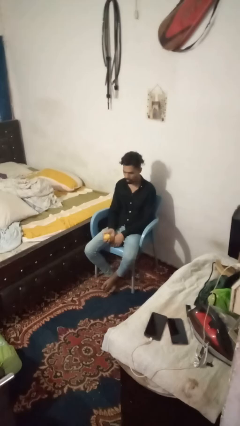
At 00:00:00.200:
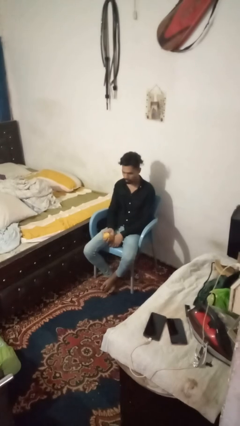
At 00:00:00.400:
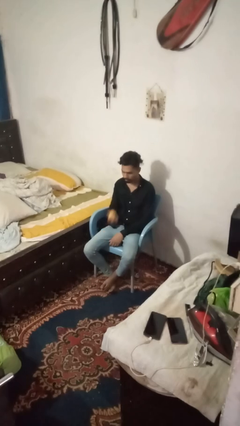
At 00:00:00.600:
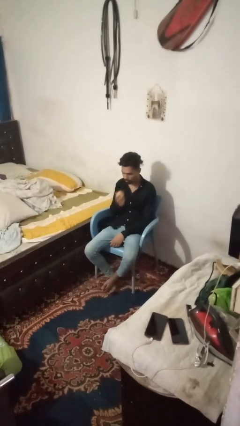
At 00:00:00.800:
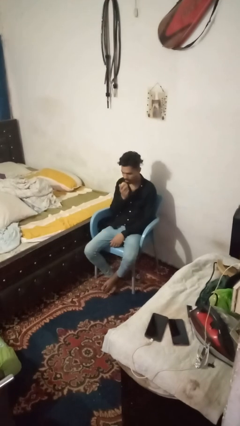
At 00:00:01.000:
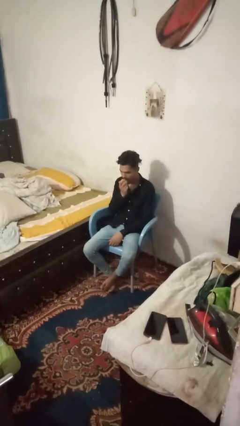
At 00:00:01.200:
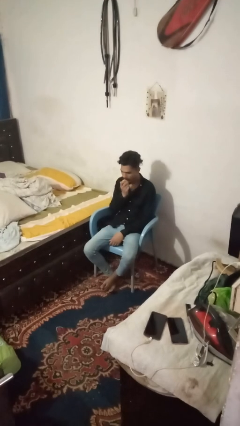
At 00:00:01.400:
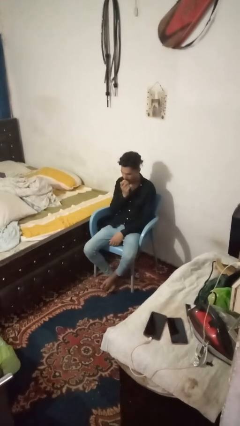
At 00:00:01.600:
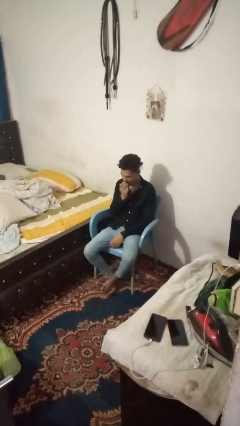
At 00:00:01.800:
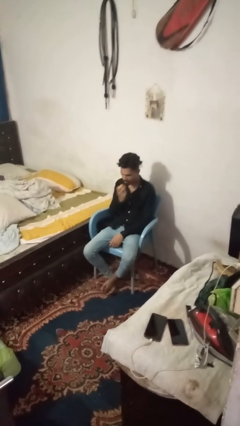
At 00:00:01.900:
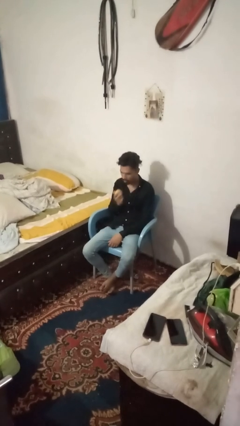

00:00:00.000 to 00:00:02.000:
person eats apple

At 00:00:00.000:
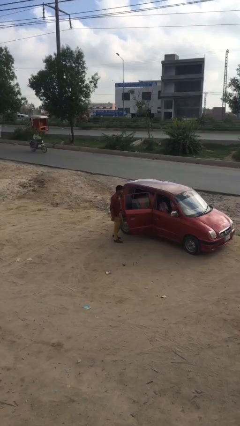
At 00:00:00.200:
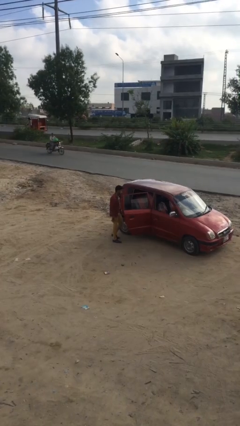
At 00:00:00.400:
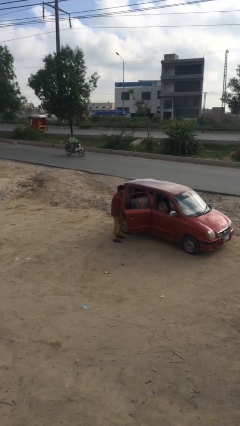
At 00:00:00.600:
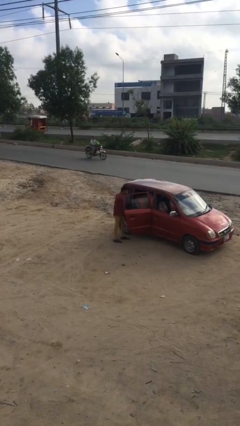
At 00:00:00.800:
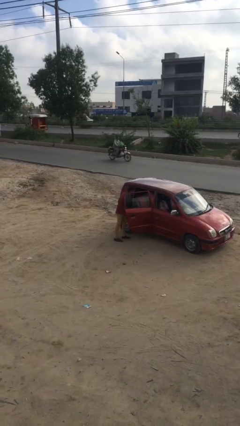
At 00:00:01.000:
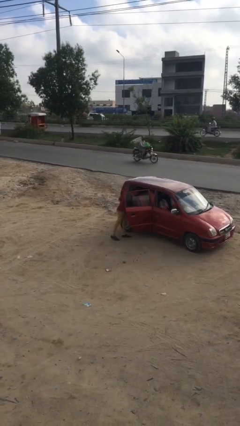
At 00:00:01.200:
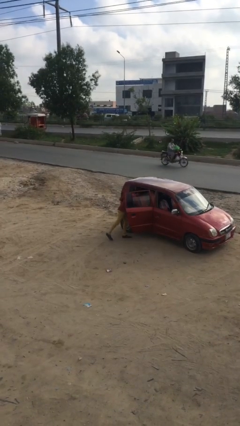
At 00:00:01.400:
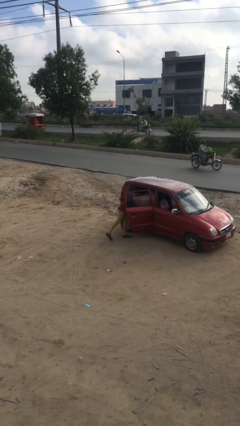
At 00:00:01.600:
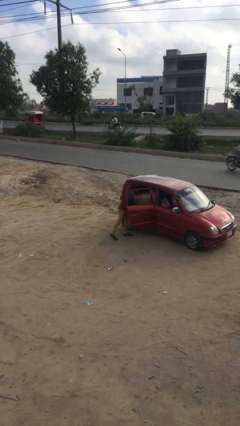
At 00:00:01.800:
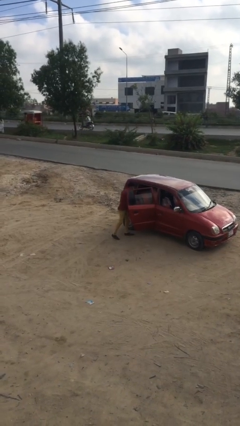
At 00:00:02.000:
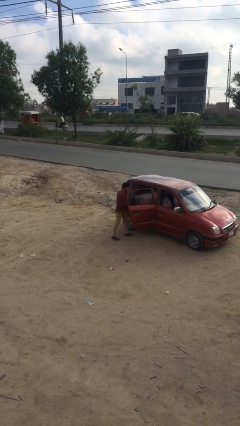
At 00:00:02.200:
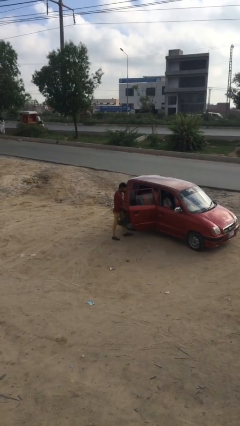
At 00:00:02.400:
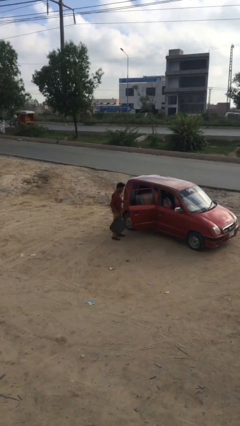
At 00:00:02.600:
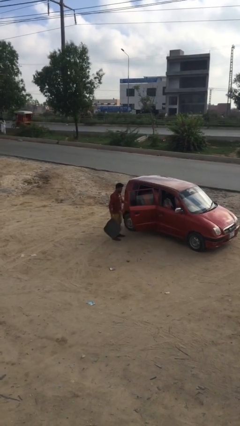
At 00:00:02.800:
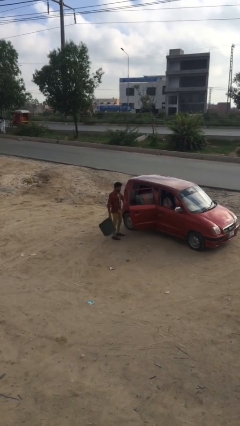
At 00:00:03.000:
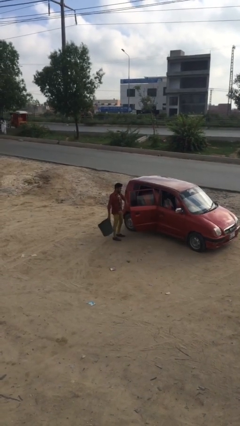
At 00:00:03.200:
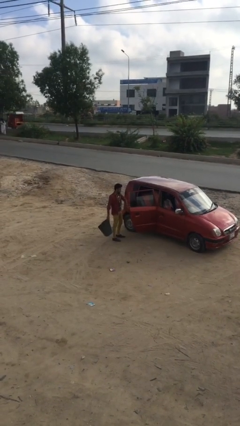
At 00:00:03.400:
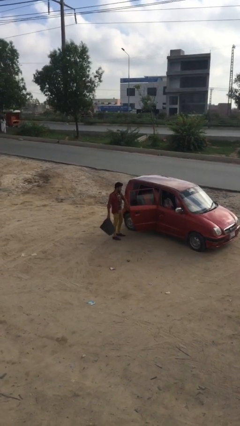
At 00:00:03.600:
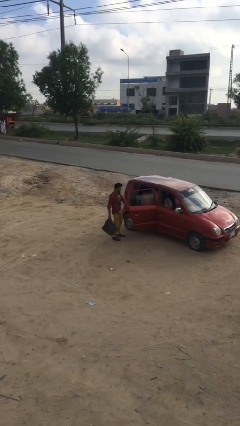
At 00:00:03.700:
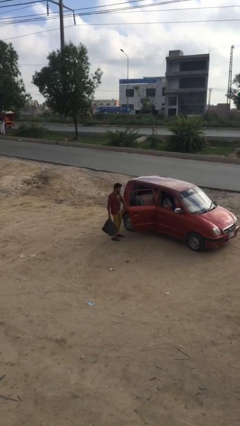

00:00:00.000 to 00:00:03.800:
person unloads car

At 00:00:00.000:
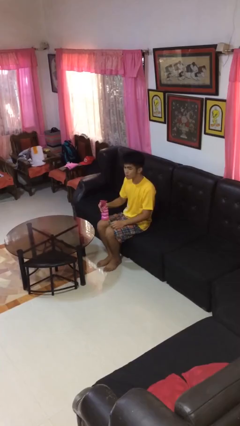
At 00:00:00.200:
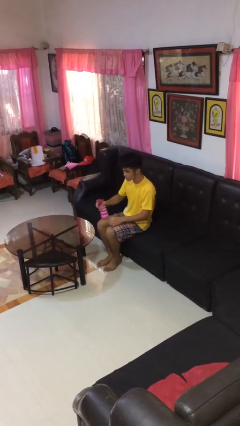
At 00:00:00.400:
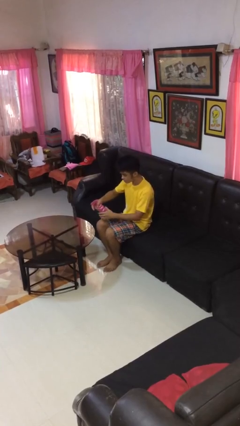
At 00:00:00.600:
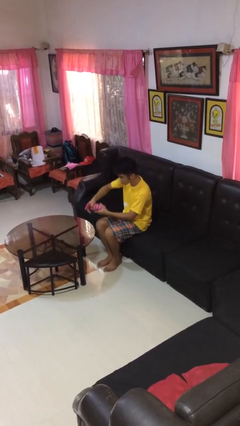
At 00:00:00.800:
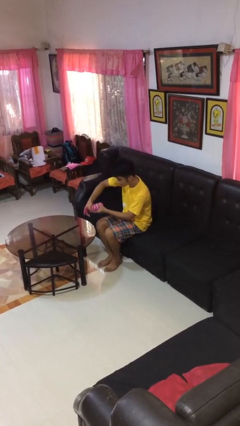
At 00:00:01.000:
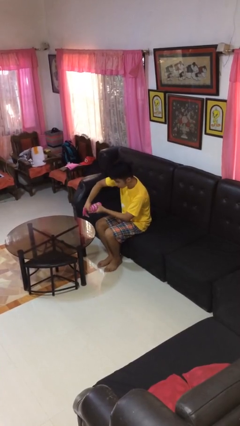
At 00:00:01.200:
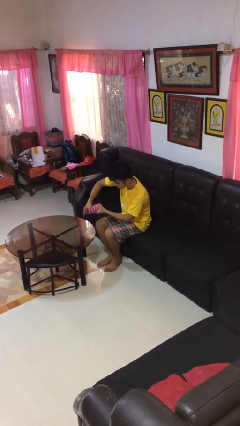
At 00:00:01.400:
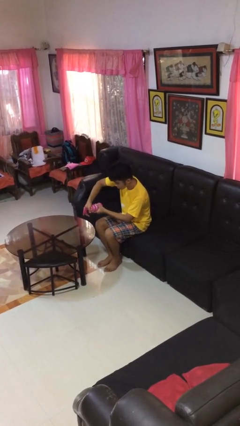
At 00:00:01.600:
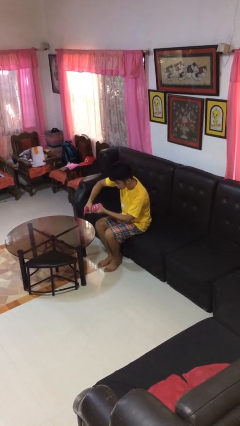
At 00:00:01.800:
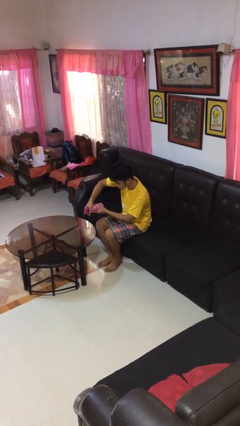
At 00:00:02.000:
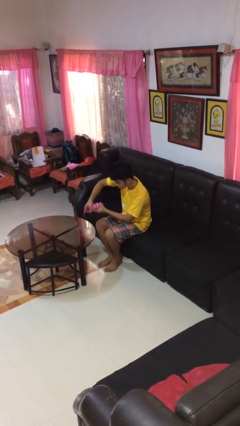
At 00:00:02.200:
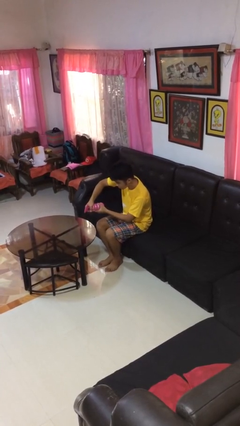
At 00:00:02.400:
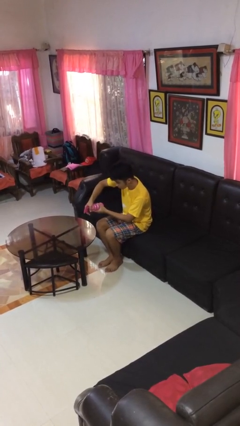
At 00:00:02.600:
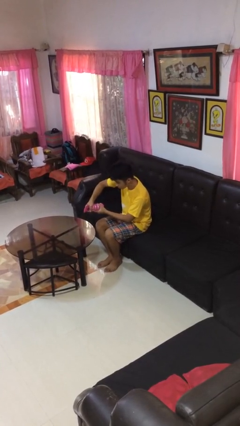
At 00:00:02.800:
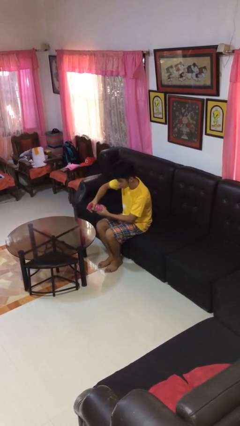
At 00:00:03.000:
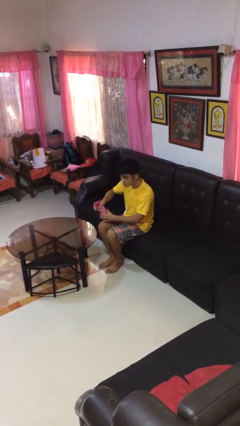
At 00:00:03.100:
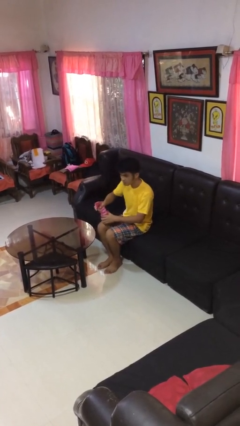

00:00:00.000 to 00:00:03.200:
person sprays from bottle

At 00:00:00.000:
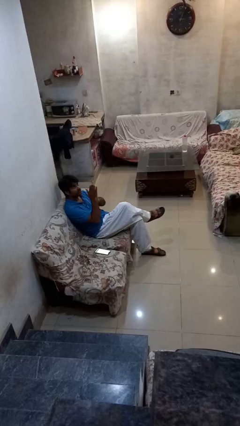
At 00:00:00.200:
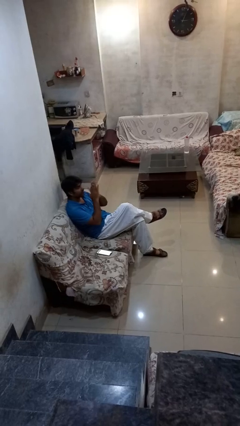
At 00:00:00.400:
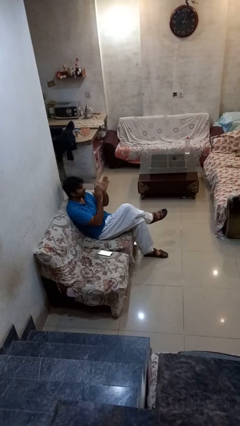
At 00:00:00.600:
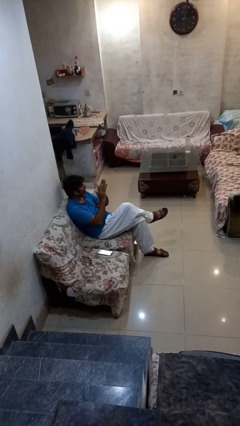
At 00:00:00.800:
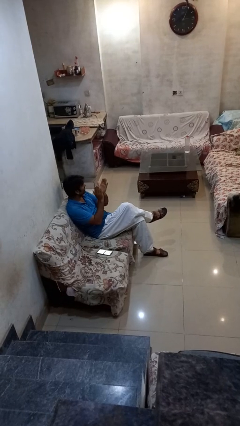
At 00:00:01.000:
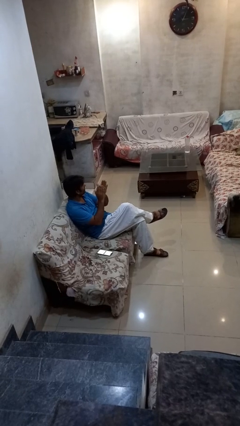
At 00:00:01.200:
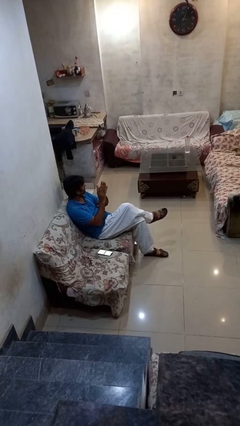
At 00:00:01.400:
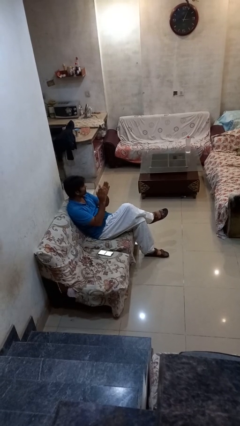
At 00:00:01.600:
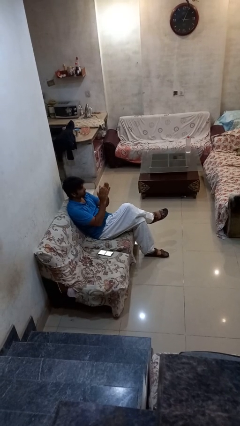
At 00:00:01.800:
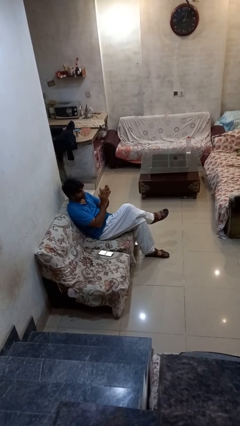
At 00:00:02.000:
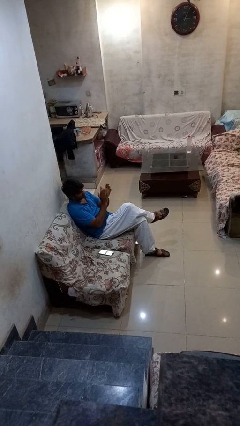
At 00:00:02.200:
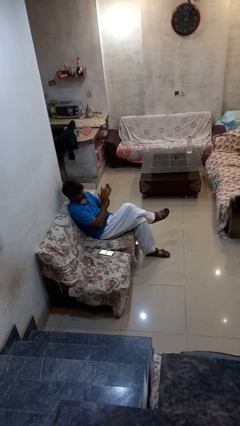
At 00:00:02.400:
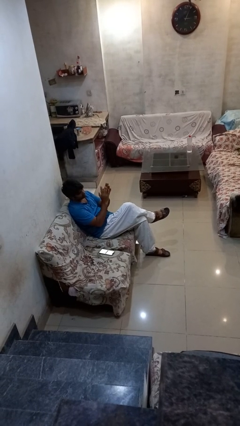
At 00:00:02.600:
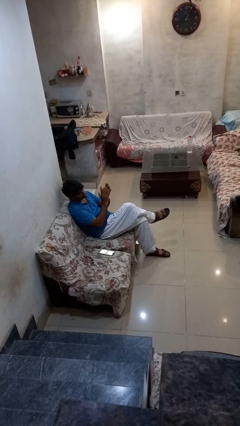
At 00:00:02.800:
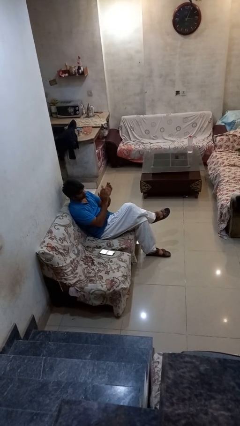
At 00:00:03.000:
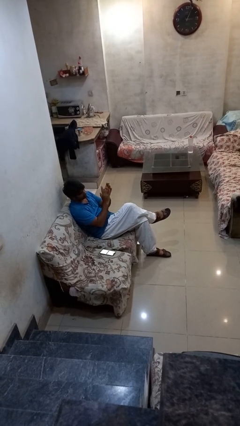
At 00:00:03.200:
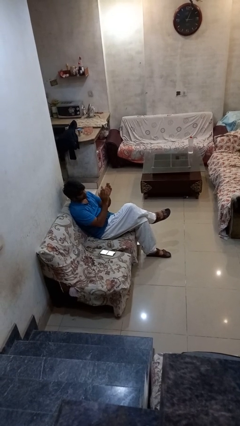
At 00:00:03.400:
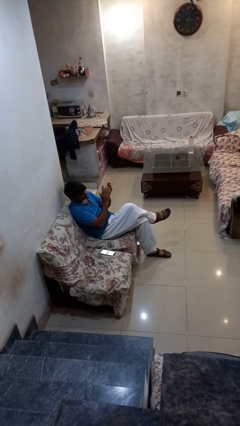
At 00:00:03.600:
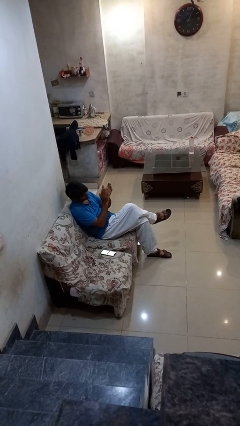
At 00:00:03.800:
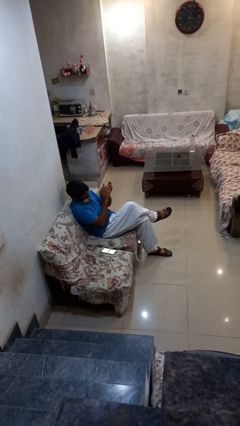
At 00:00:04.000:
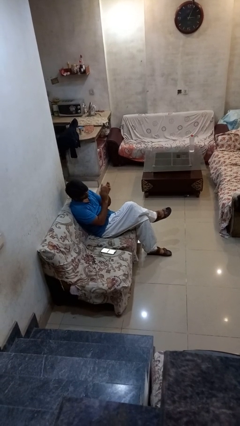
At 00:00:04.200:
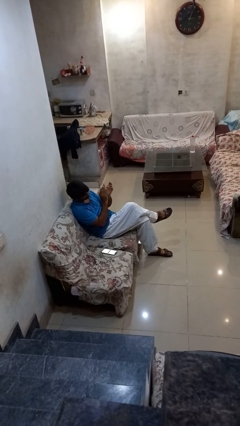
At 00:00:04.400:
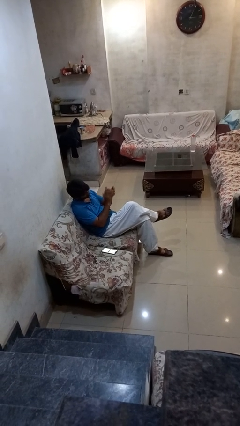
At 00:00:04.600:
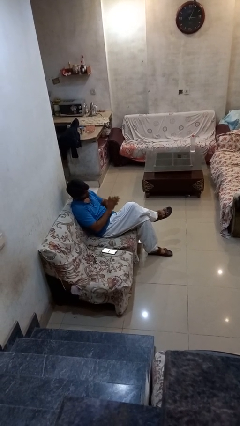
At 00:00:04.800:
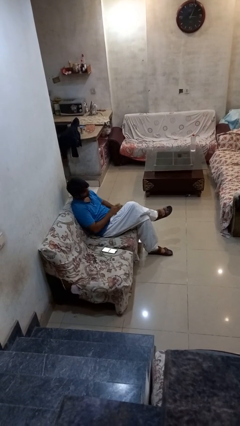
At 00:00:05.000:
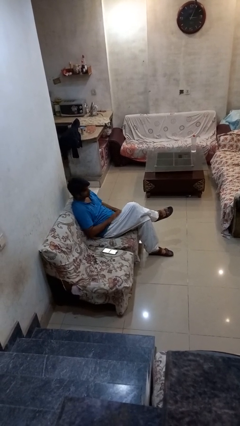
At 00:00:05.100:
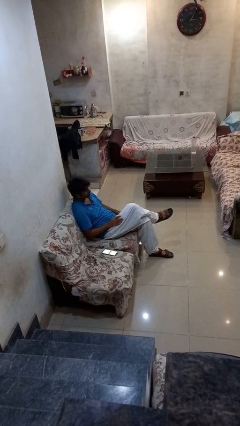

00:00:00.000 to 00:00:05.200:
person claps hands

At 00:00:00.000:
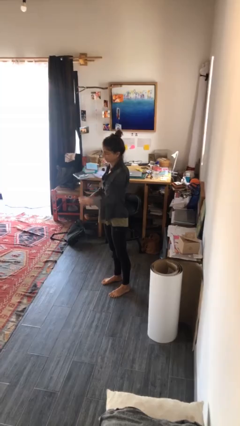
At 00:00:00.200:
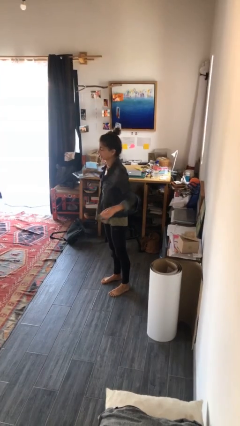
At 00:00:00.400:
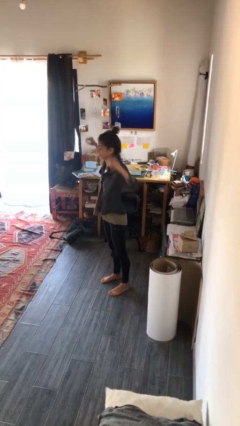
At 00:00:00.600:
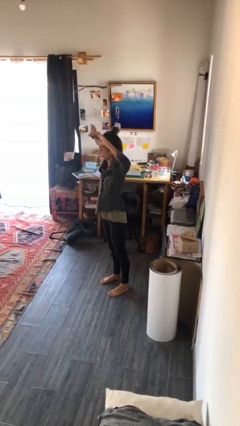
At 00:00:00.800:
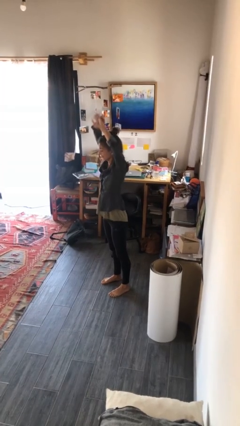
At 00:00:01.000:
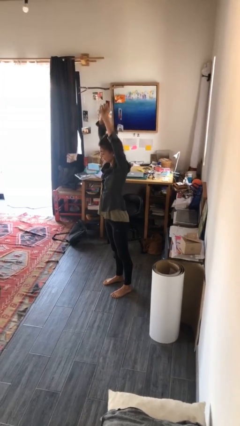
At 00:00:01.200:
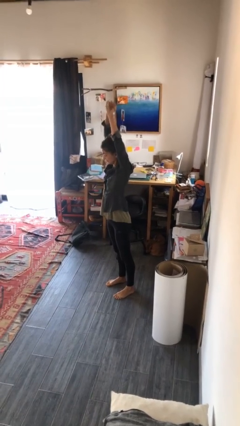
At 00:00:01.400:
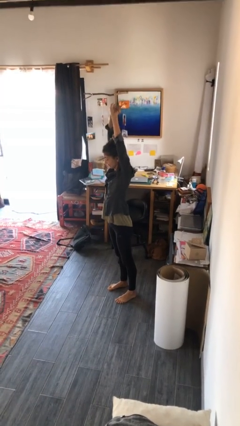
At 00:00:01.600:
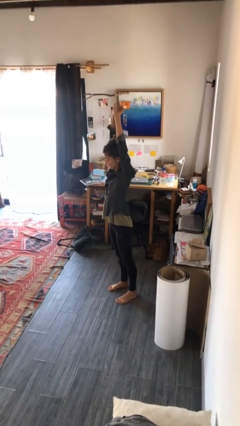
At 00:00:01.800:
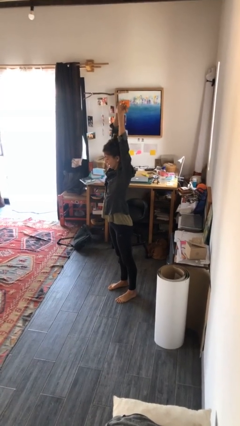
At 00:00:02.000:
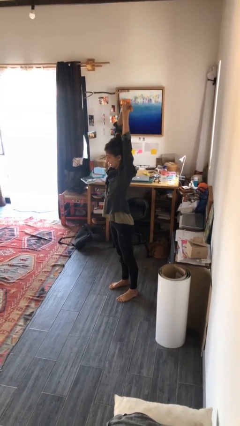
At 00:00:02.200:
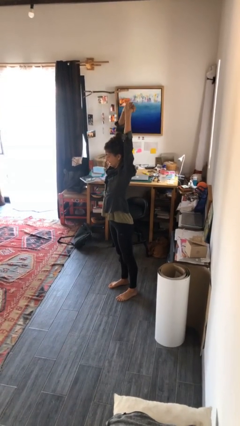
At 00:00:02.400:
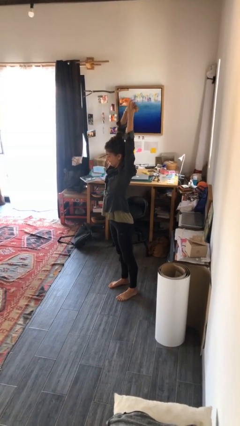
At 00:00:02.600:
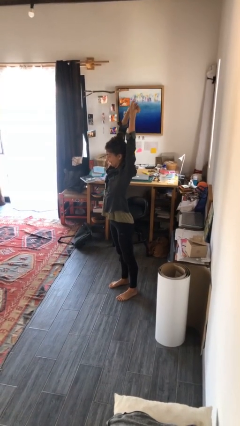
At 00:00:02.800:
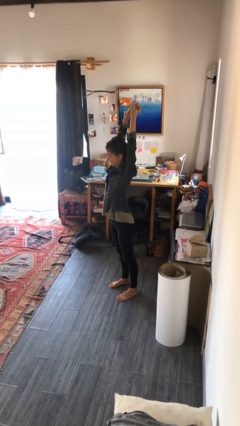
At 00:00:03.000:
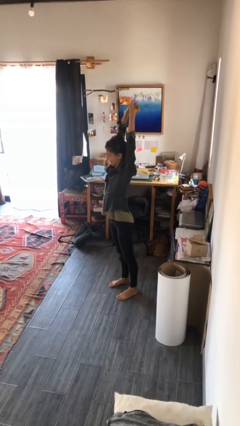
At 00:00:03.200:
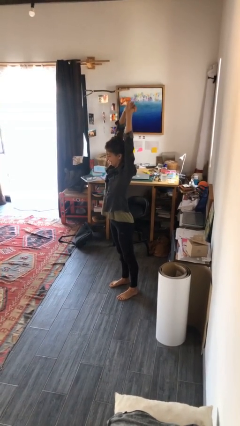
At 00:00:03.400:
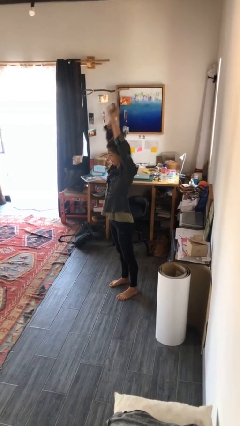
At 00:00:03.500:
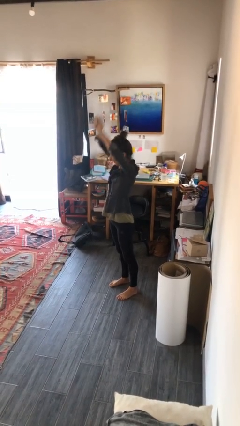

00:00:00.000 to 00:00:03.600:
person stretches arms over head
